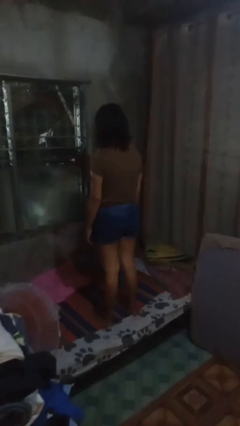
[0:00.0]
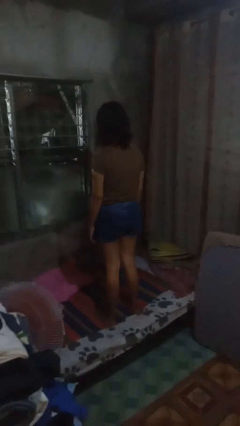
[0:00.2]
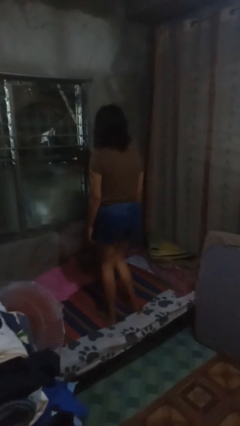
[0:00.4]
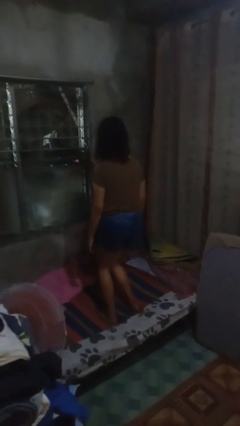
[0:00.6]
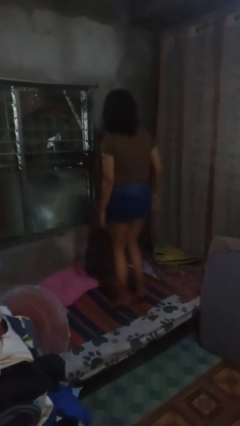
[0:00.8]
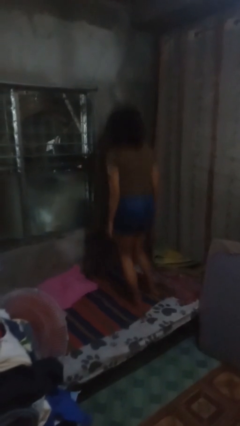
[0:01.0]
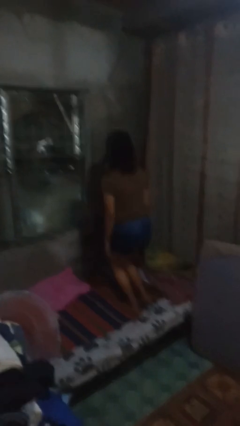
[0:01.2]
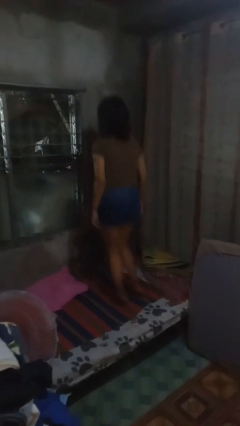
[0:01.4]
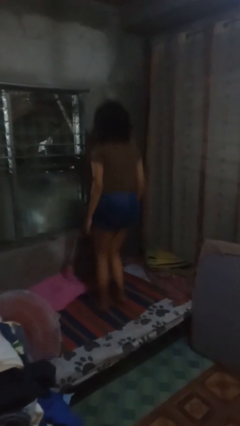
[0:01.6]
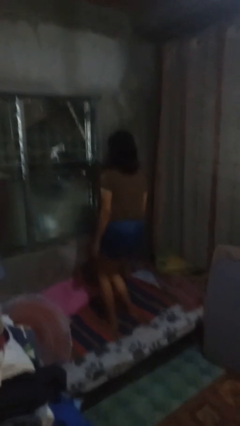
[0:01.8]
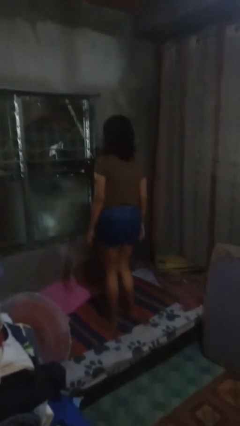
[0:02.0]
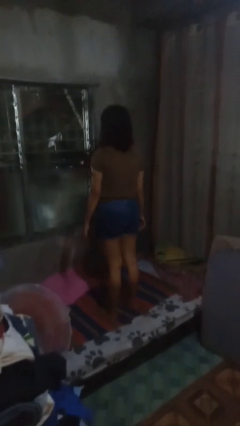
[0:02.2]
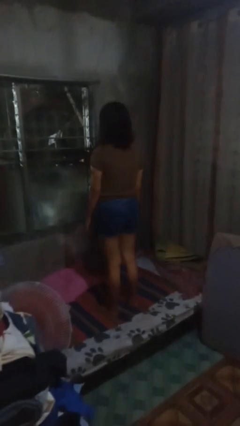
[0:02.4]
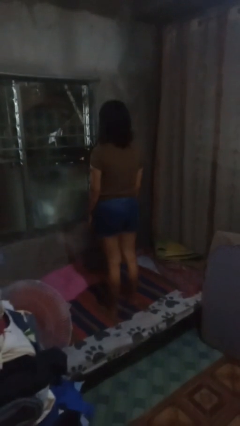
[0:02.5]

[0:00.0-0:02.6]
person jumps on bed

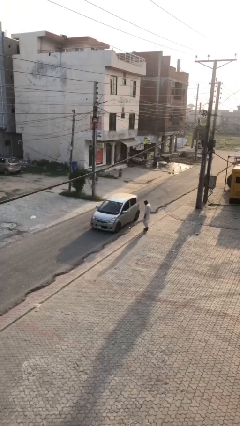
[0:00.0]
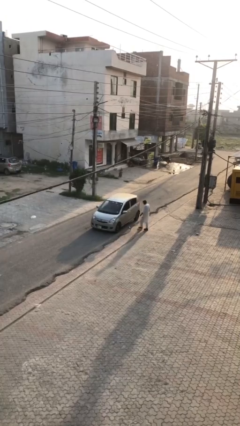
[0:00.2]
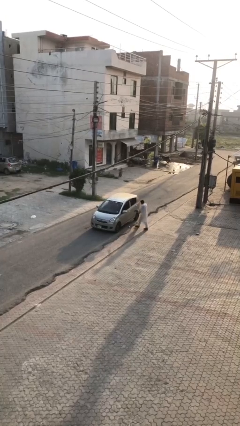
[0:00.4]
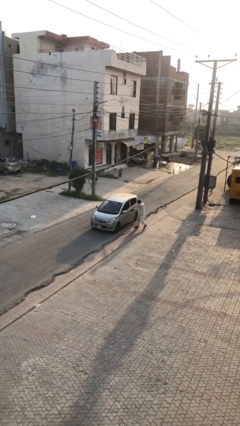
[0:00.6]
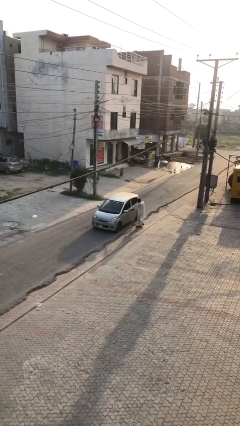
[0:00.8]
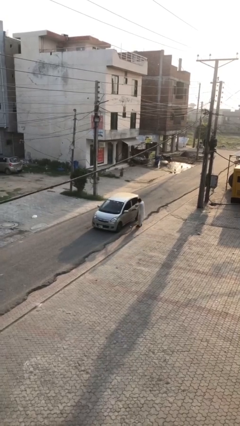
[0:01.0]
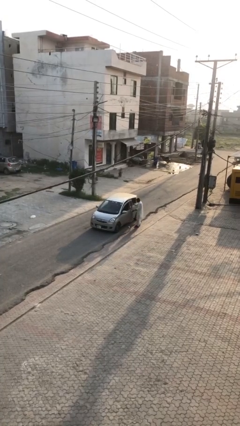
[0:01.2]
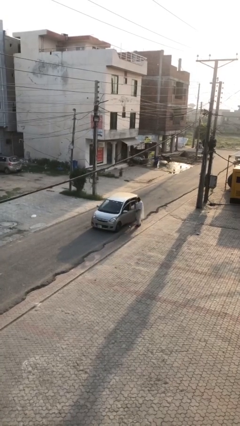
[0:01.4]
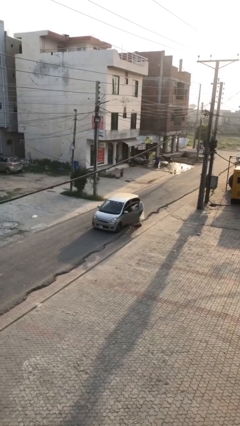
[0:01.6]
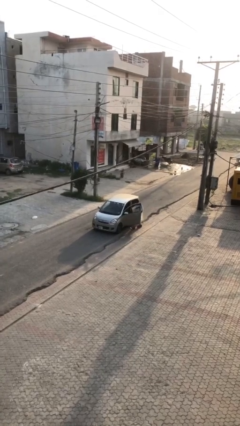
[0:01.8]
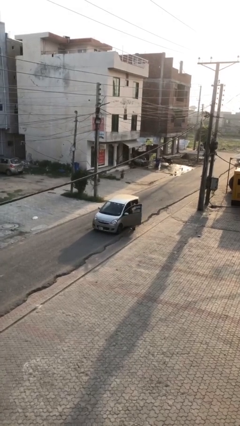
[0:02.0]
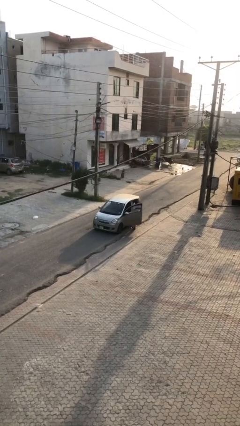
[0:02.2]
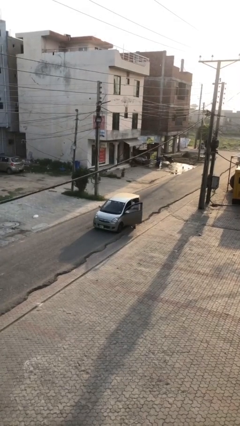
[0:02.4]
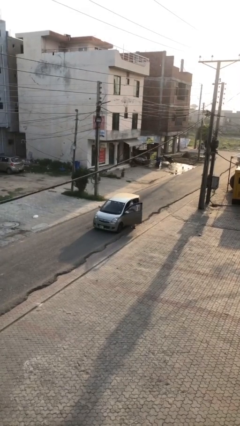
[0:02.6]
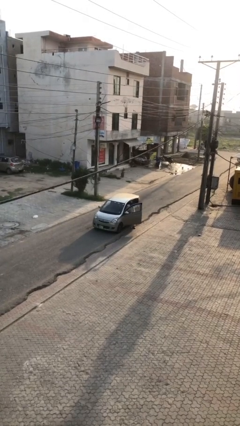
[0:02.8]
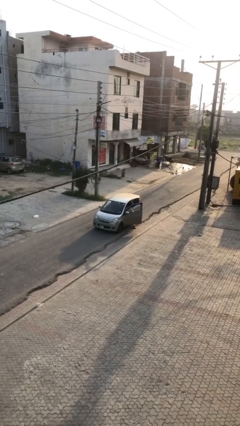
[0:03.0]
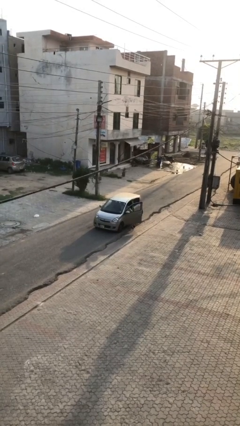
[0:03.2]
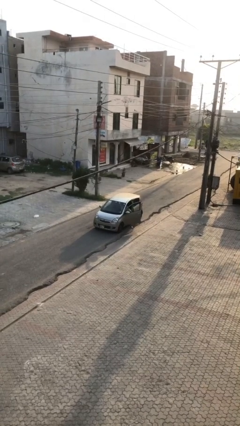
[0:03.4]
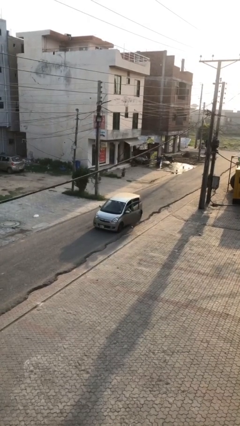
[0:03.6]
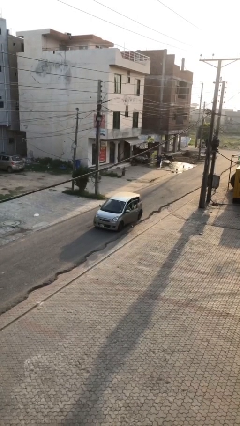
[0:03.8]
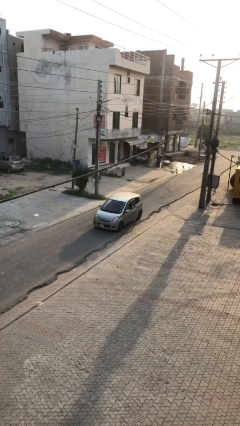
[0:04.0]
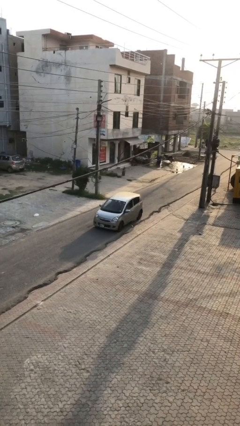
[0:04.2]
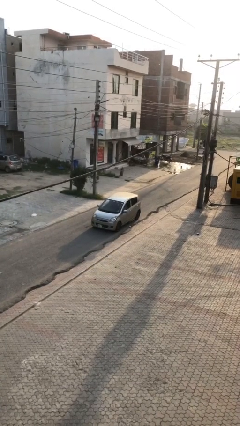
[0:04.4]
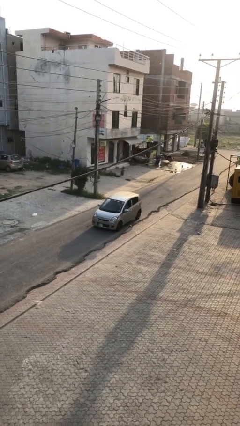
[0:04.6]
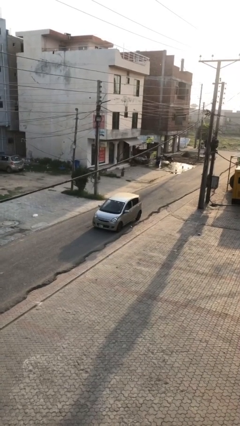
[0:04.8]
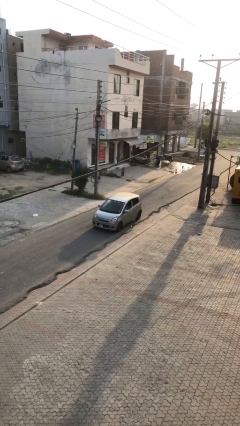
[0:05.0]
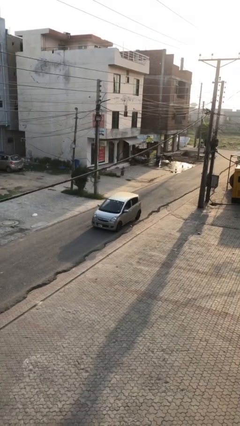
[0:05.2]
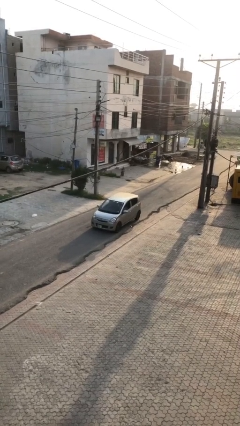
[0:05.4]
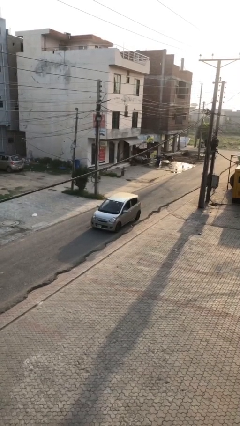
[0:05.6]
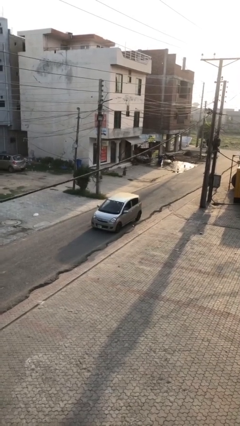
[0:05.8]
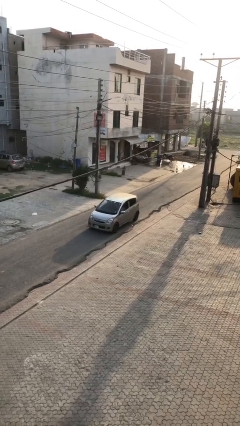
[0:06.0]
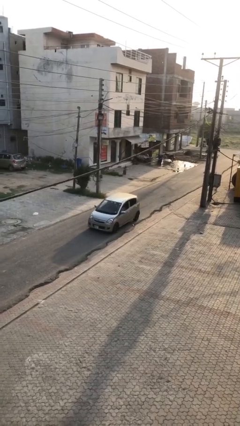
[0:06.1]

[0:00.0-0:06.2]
car picks up person

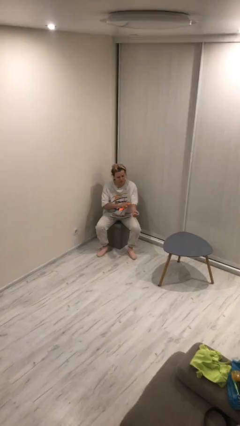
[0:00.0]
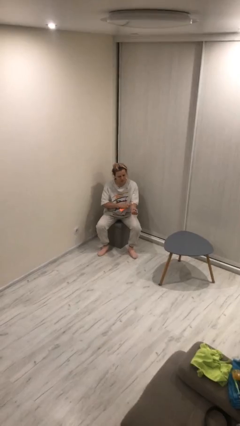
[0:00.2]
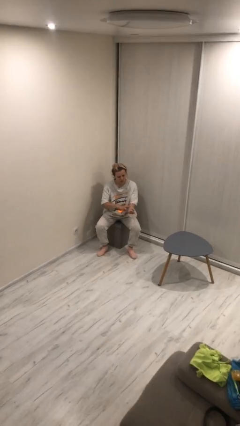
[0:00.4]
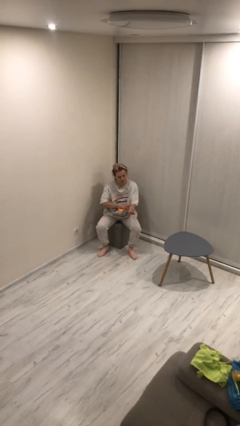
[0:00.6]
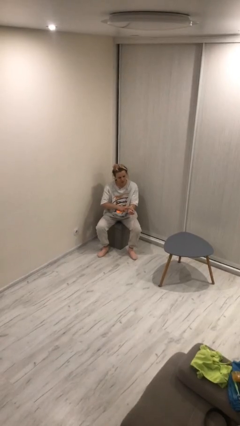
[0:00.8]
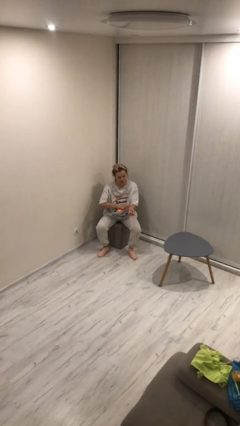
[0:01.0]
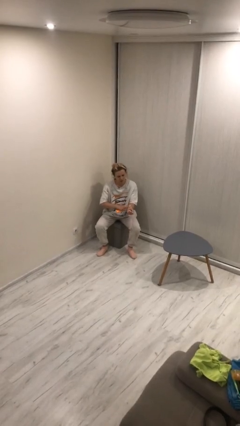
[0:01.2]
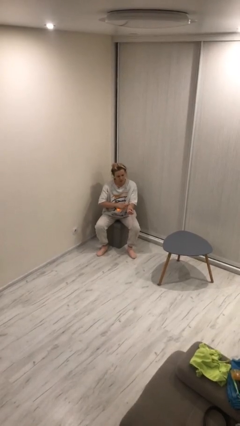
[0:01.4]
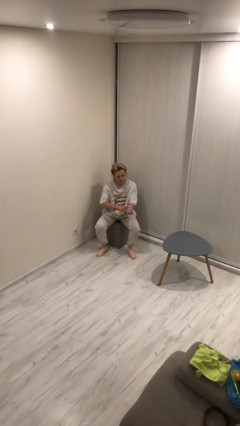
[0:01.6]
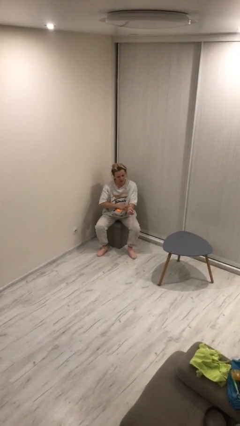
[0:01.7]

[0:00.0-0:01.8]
person applies sunscreen

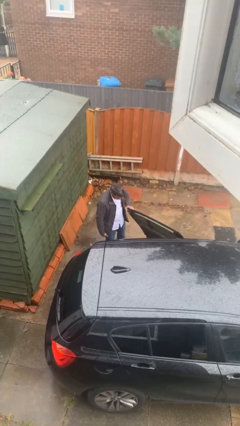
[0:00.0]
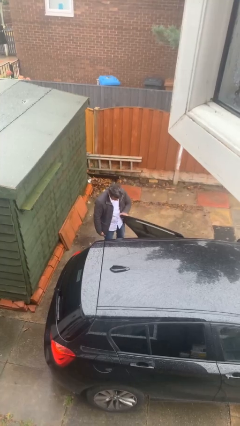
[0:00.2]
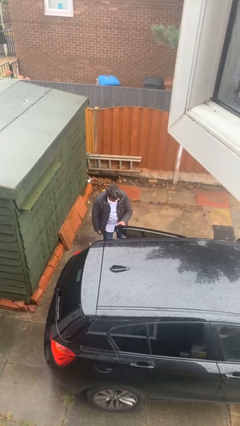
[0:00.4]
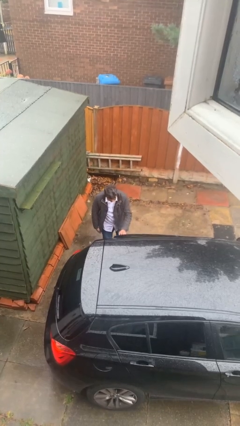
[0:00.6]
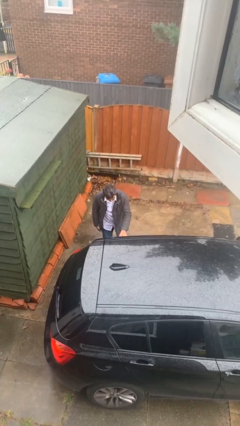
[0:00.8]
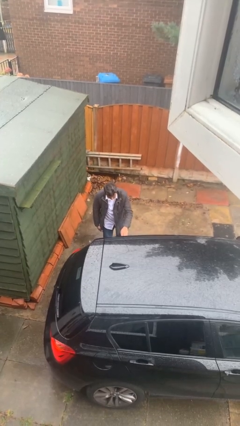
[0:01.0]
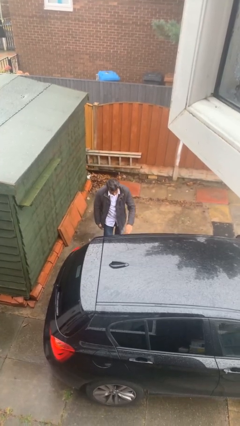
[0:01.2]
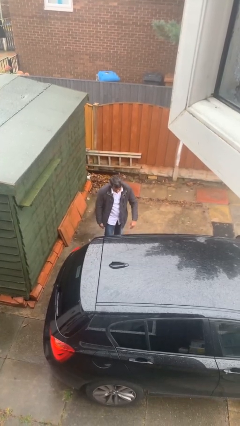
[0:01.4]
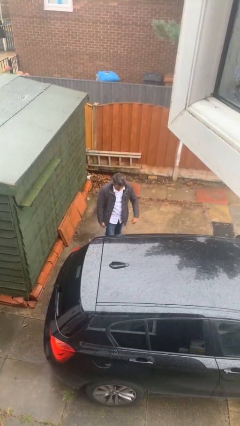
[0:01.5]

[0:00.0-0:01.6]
person closes car door

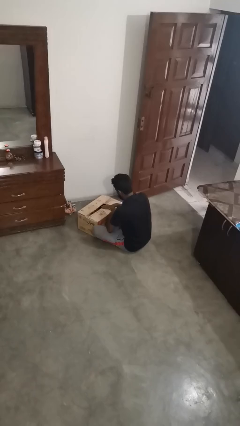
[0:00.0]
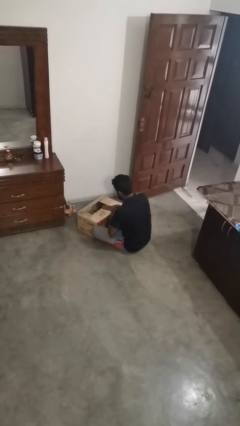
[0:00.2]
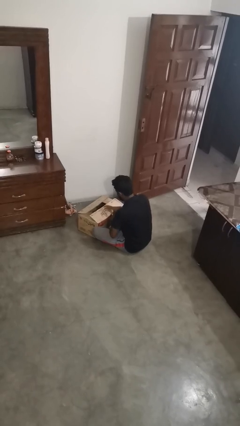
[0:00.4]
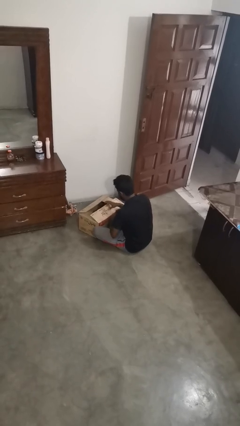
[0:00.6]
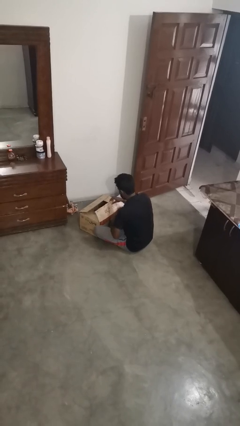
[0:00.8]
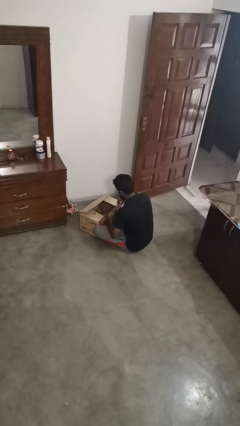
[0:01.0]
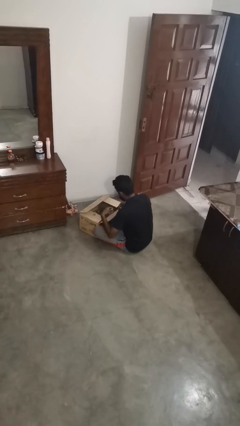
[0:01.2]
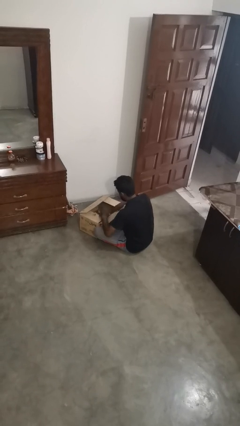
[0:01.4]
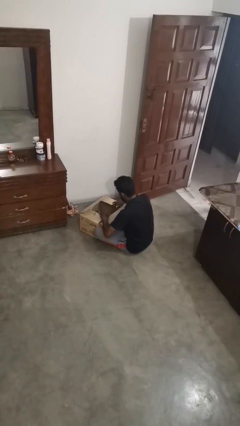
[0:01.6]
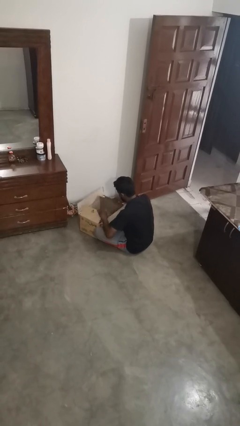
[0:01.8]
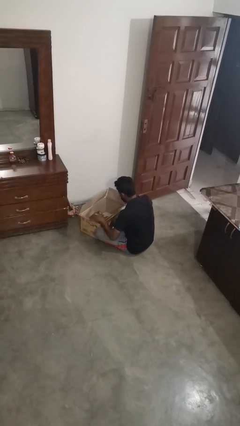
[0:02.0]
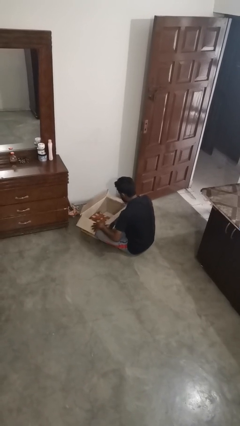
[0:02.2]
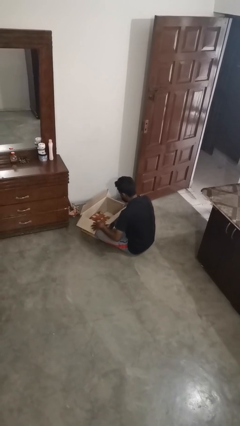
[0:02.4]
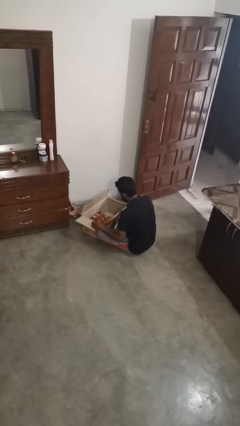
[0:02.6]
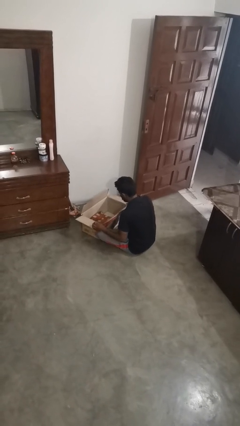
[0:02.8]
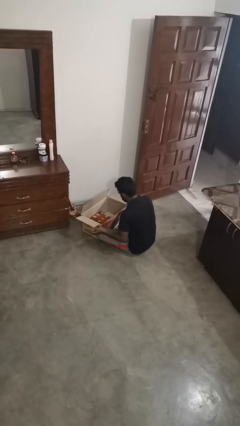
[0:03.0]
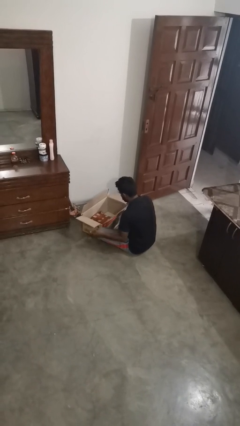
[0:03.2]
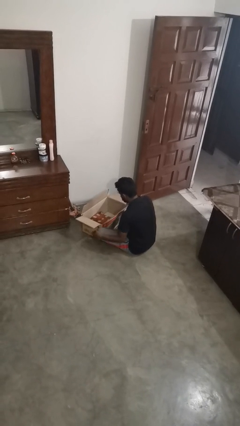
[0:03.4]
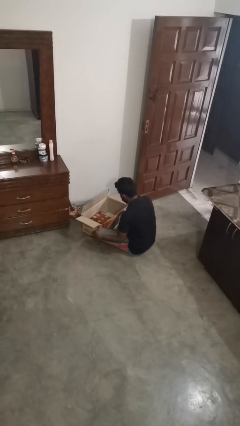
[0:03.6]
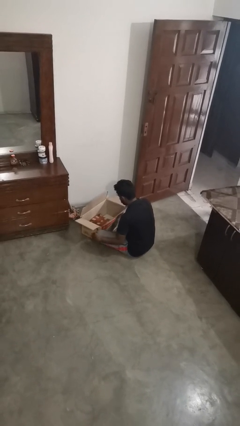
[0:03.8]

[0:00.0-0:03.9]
person opens box

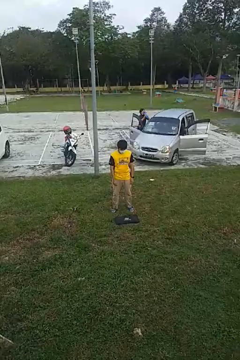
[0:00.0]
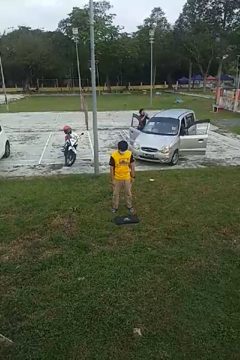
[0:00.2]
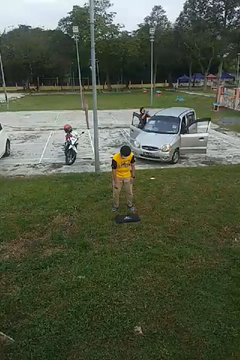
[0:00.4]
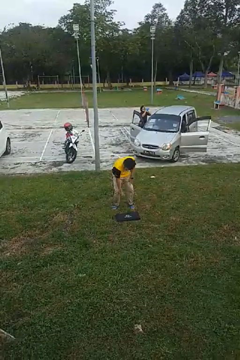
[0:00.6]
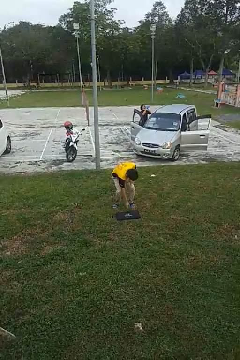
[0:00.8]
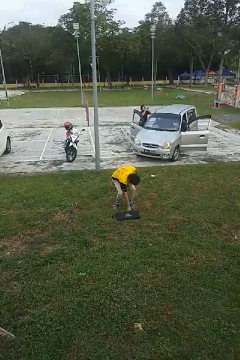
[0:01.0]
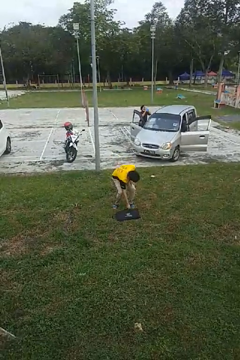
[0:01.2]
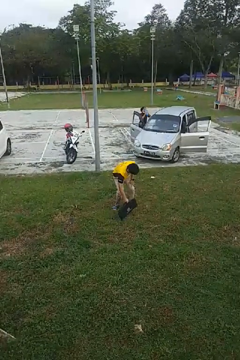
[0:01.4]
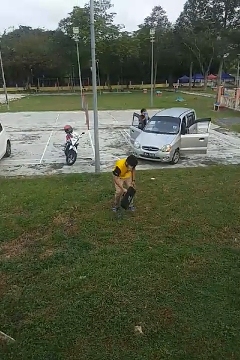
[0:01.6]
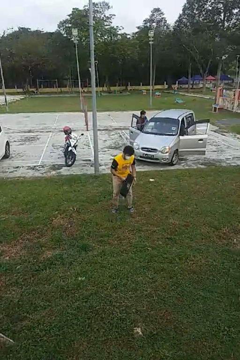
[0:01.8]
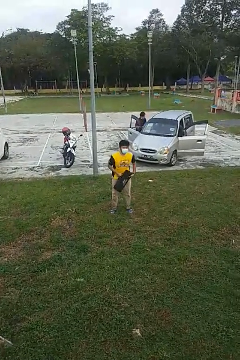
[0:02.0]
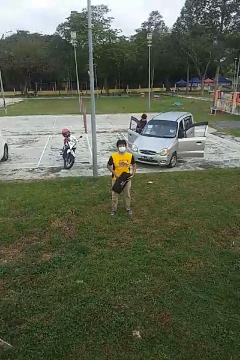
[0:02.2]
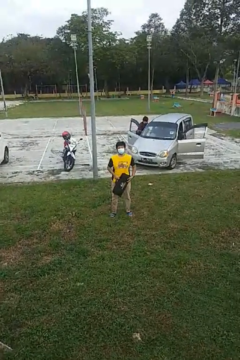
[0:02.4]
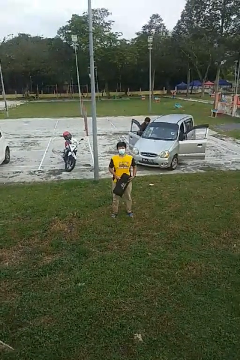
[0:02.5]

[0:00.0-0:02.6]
person picks up object from floor
